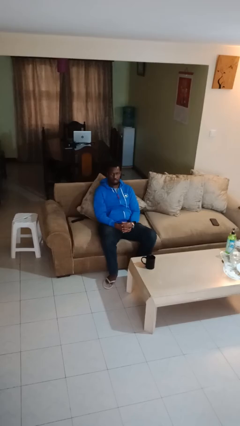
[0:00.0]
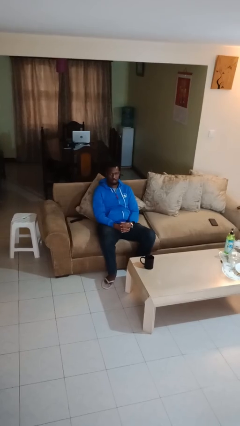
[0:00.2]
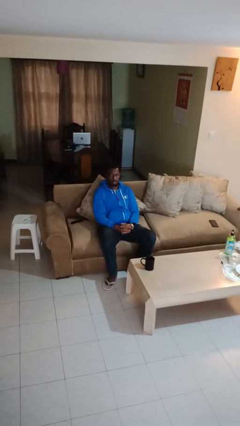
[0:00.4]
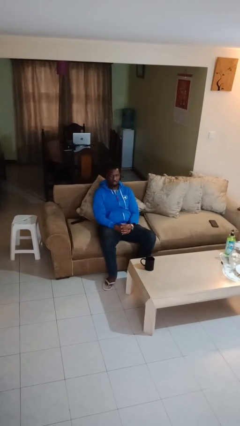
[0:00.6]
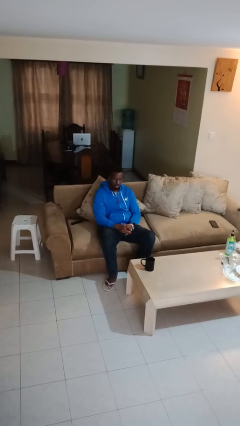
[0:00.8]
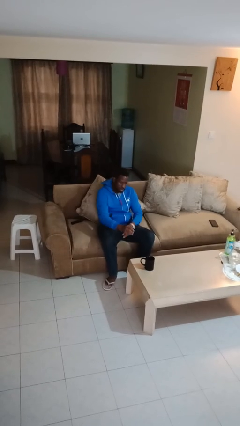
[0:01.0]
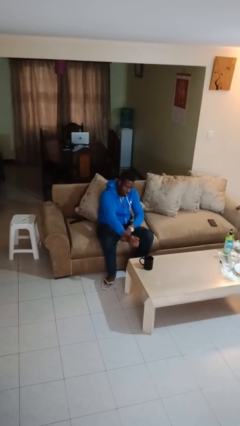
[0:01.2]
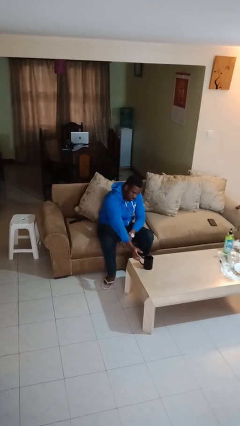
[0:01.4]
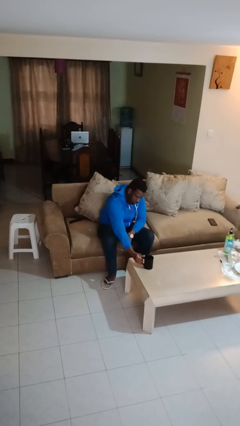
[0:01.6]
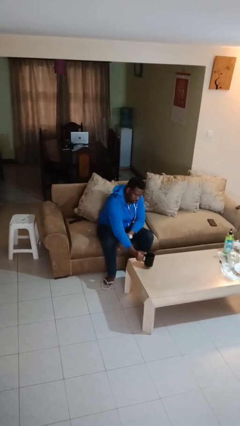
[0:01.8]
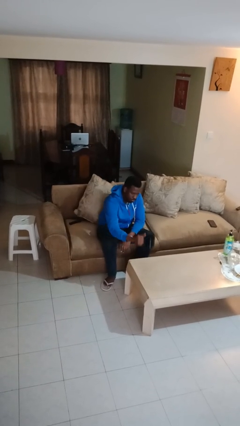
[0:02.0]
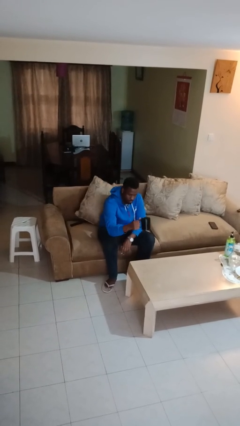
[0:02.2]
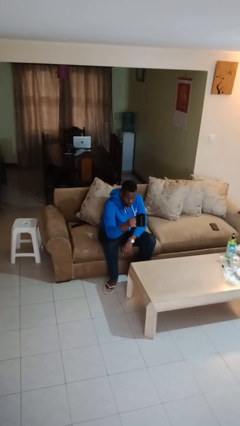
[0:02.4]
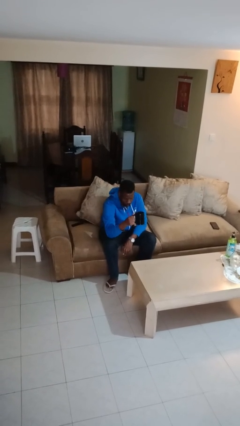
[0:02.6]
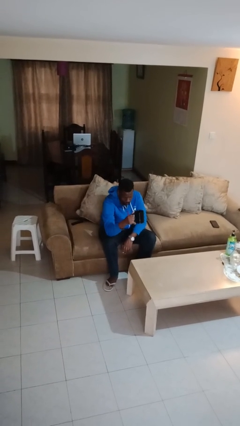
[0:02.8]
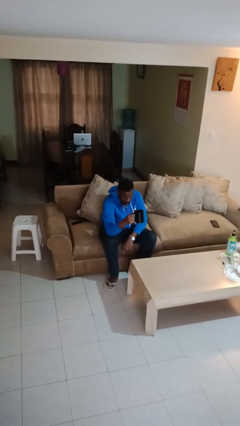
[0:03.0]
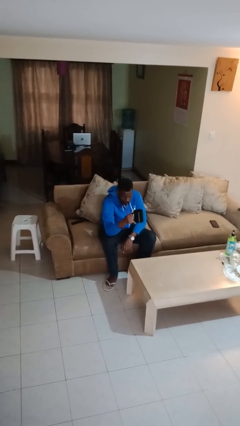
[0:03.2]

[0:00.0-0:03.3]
person picks up object from table

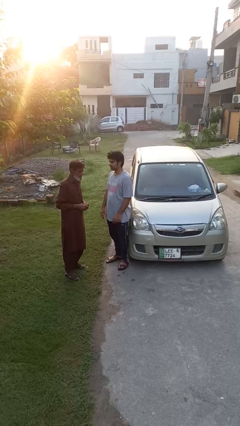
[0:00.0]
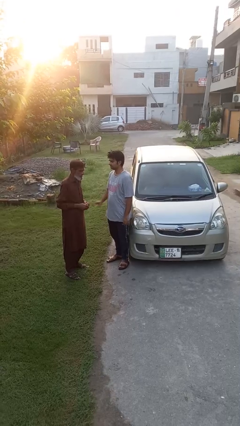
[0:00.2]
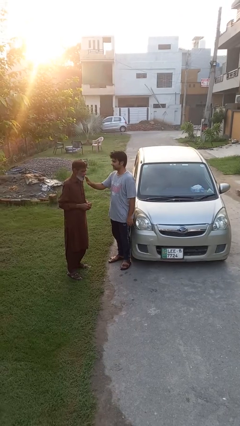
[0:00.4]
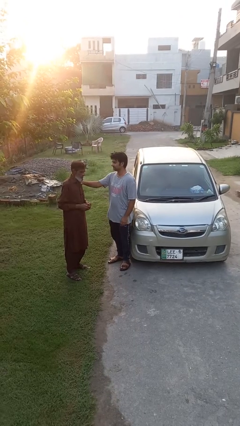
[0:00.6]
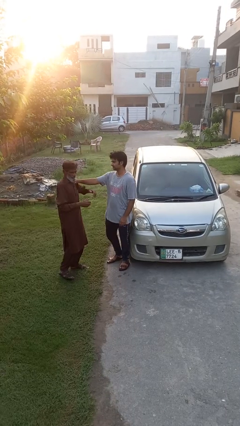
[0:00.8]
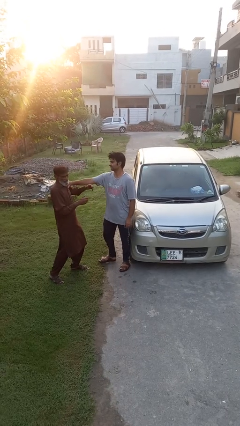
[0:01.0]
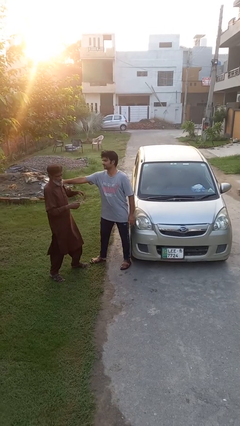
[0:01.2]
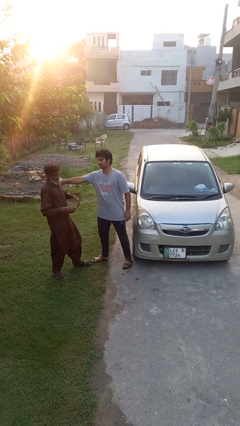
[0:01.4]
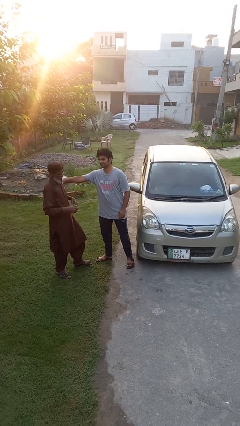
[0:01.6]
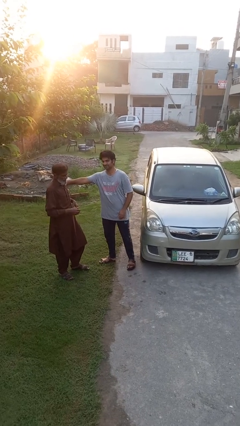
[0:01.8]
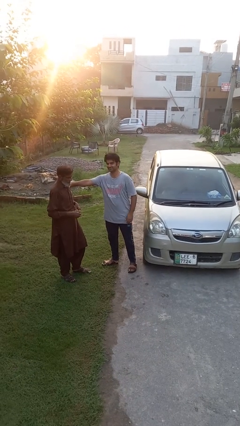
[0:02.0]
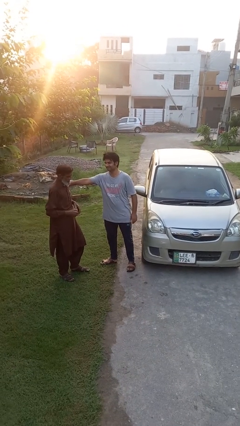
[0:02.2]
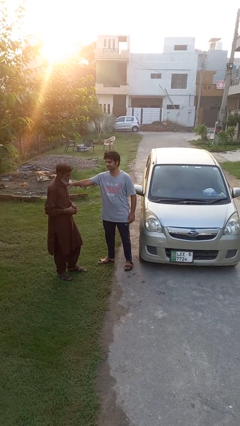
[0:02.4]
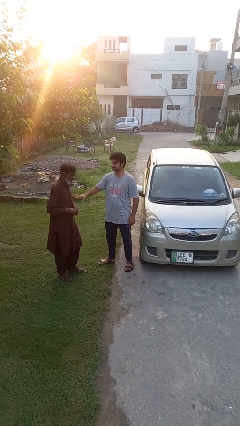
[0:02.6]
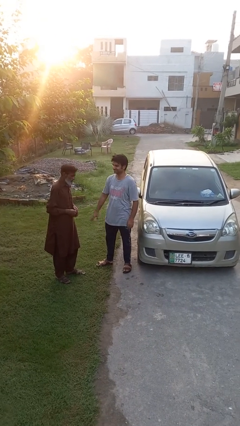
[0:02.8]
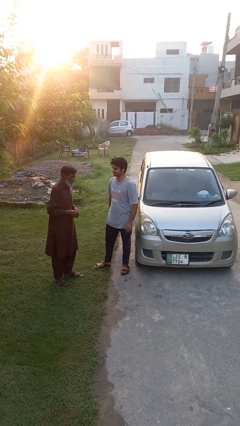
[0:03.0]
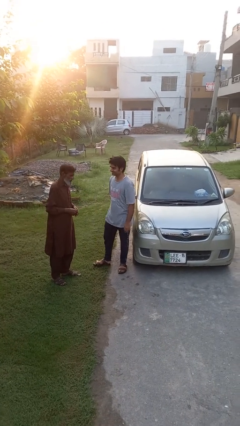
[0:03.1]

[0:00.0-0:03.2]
person shoves person

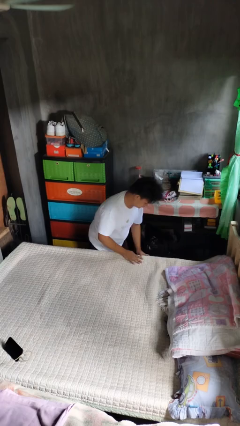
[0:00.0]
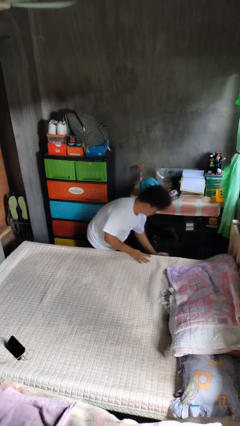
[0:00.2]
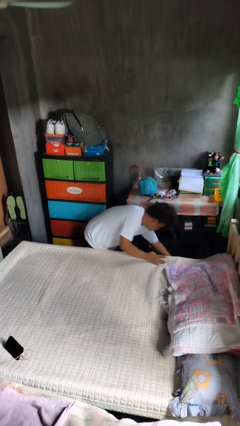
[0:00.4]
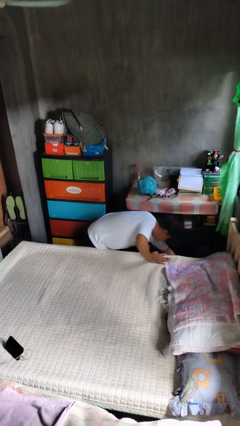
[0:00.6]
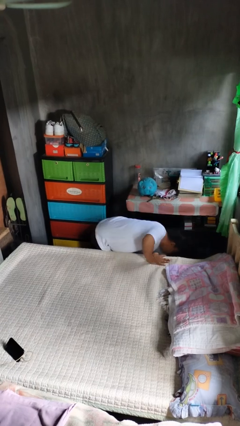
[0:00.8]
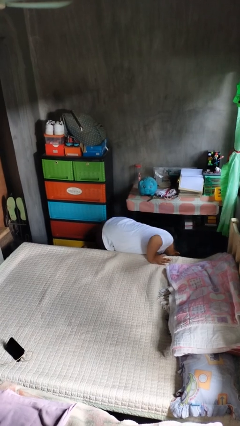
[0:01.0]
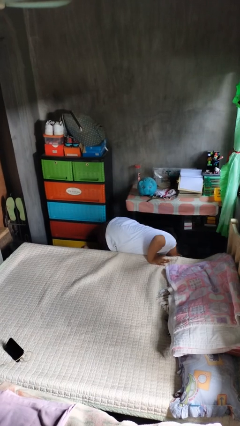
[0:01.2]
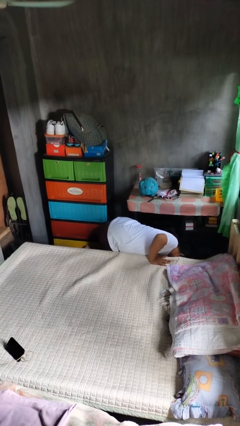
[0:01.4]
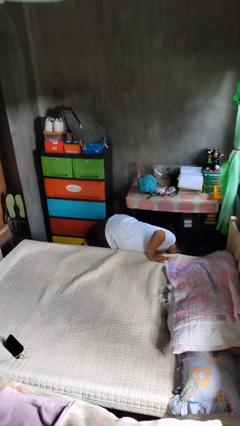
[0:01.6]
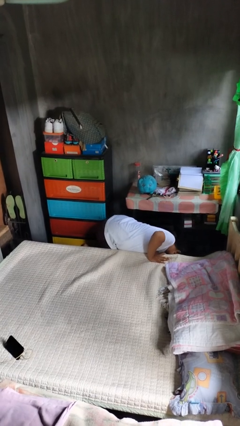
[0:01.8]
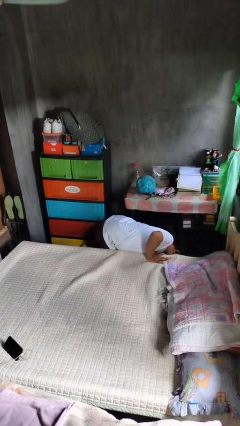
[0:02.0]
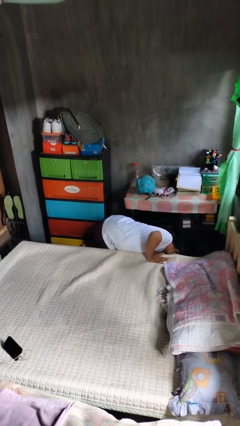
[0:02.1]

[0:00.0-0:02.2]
person searches under bed

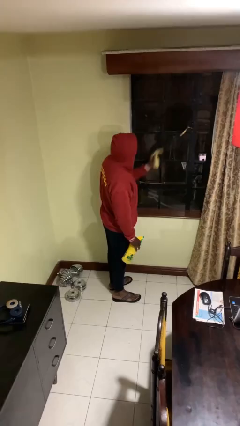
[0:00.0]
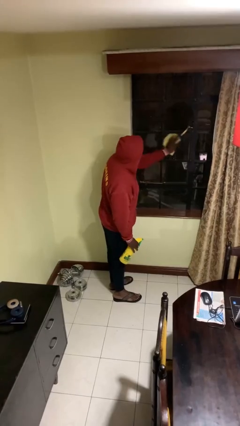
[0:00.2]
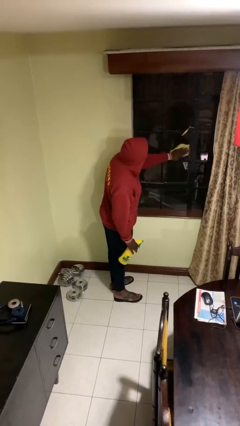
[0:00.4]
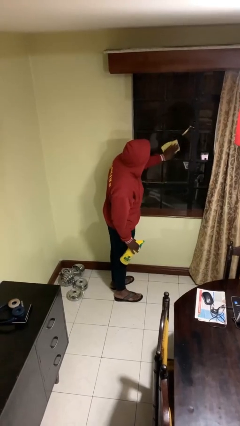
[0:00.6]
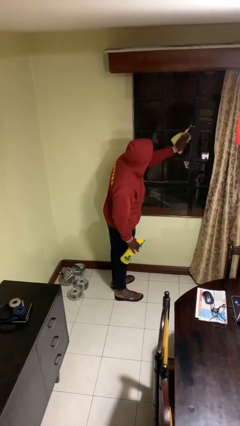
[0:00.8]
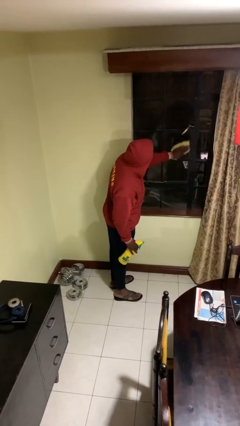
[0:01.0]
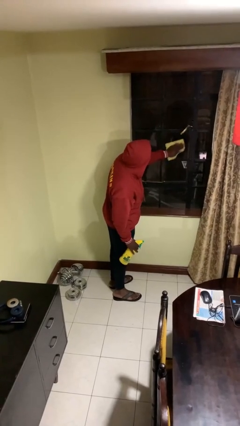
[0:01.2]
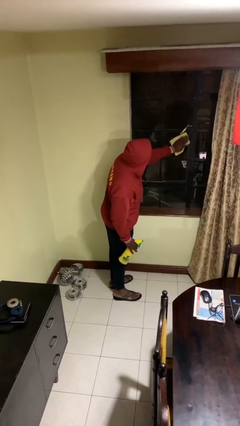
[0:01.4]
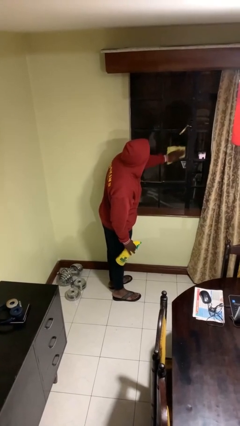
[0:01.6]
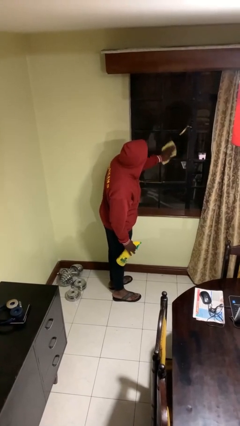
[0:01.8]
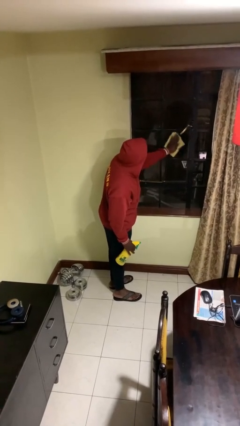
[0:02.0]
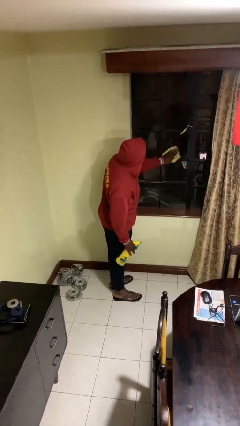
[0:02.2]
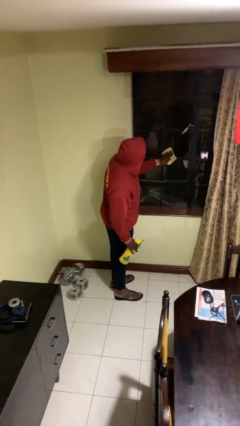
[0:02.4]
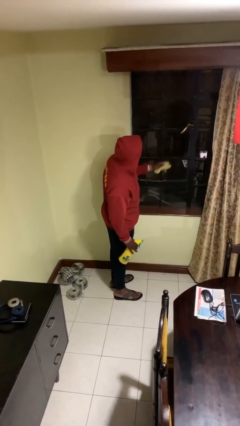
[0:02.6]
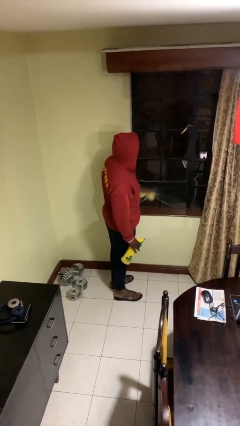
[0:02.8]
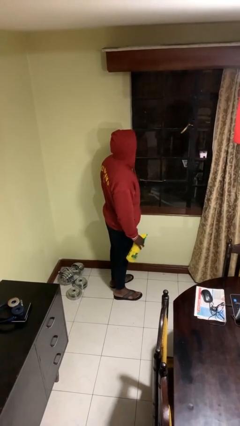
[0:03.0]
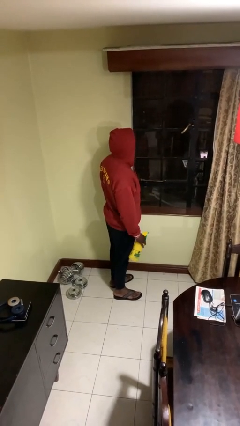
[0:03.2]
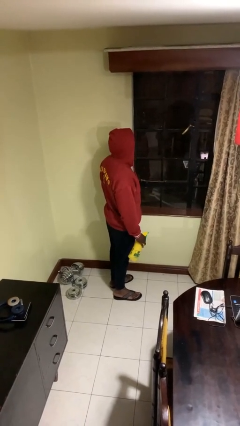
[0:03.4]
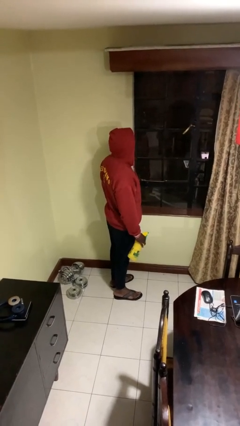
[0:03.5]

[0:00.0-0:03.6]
person washes window

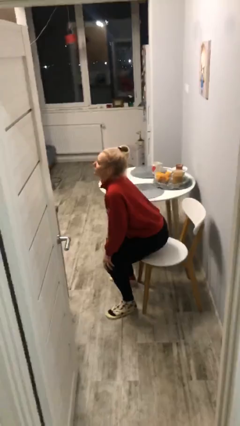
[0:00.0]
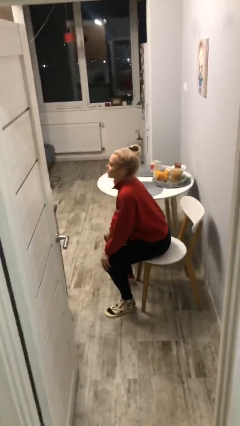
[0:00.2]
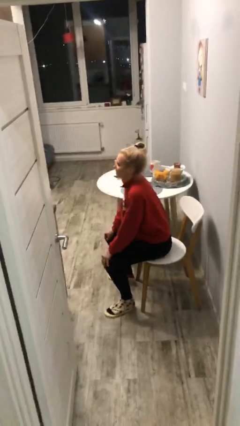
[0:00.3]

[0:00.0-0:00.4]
person sits down

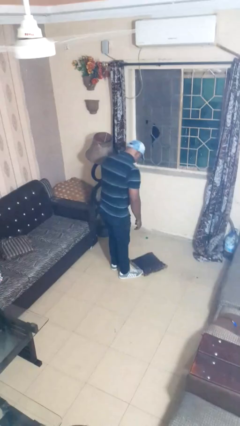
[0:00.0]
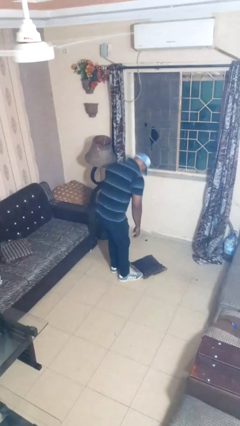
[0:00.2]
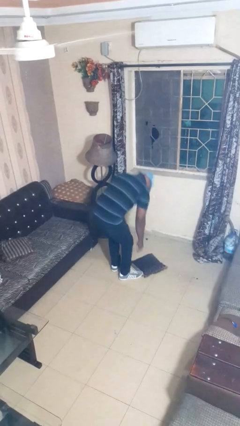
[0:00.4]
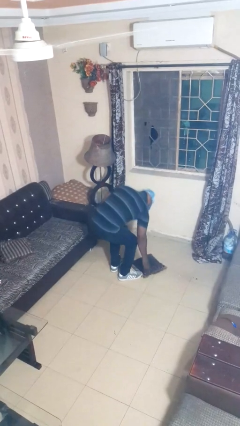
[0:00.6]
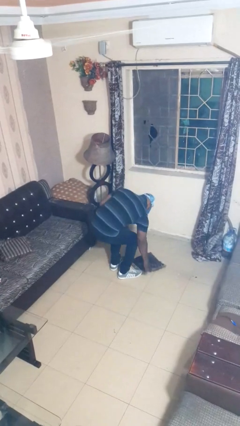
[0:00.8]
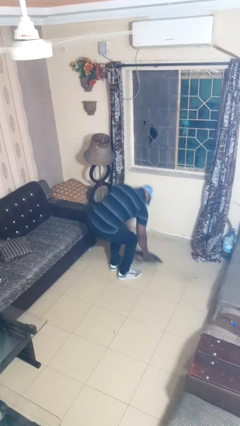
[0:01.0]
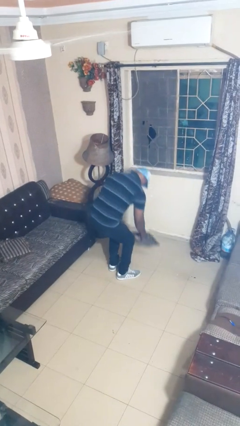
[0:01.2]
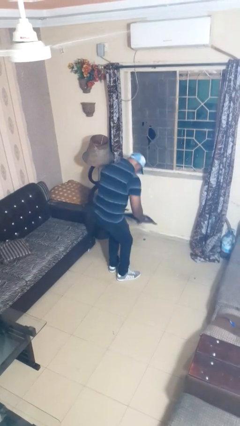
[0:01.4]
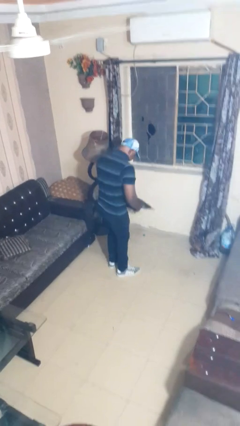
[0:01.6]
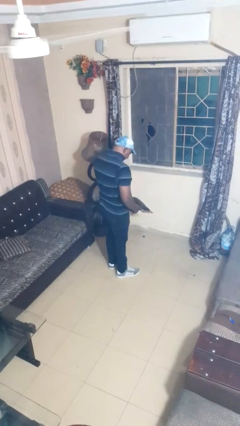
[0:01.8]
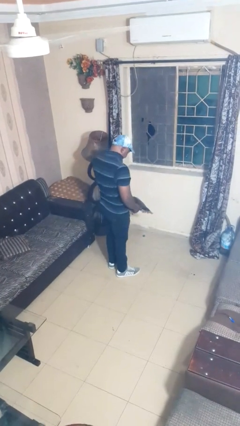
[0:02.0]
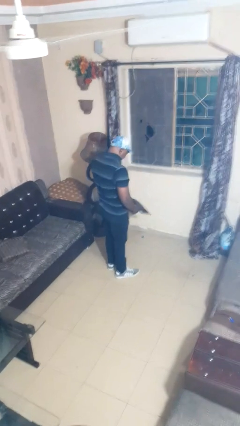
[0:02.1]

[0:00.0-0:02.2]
person picks up object from floor

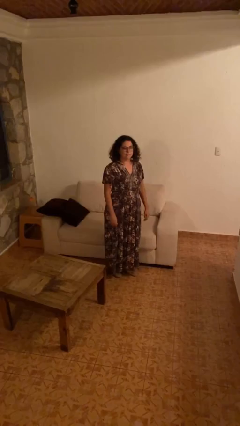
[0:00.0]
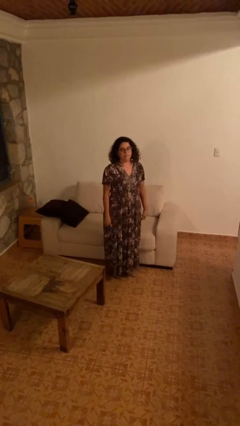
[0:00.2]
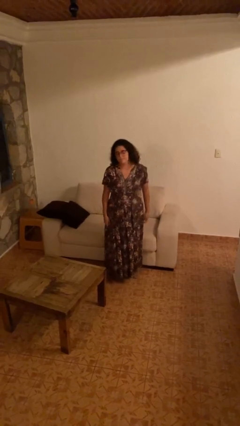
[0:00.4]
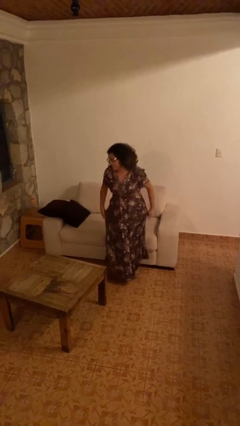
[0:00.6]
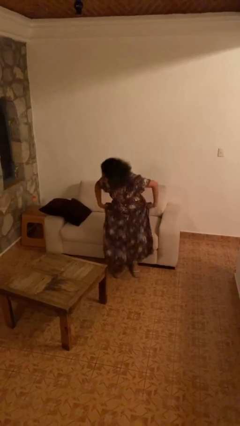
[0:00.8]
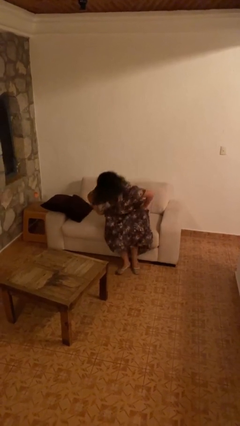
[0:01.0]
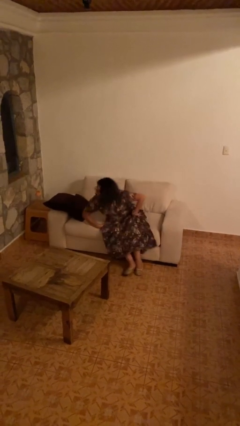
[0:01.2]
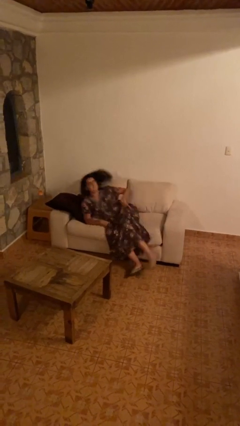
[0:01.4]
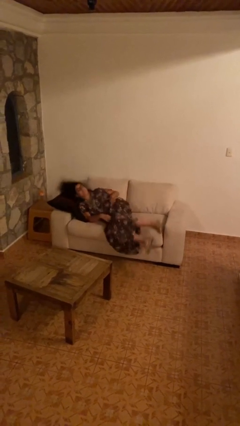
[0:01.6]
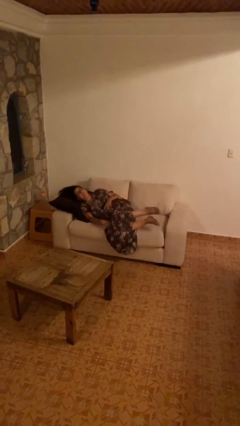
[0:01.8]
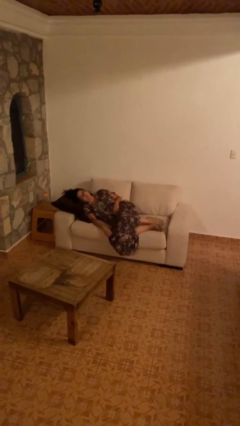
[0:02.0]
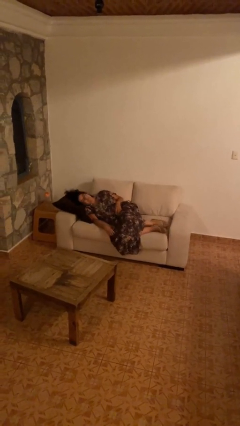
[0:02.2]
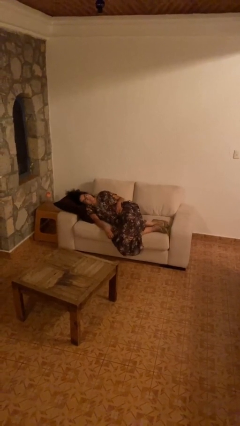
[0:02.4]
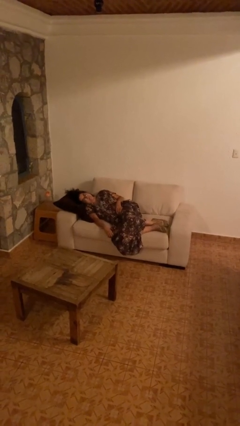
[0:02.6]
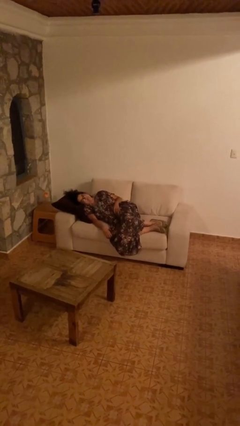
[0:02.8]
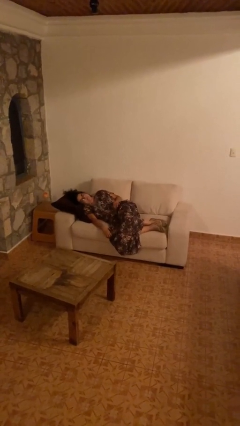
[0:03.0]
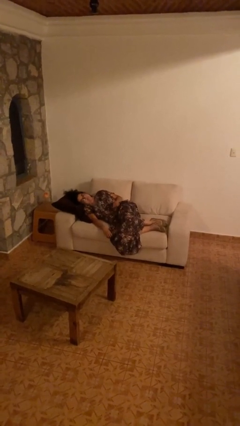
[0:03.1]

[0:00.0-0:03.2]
person lies down on couch
